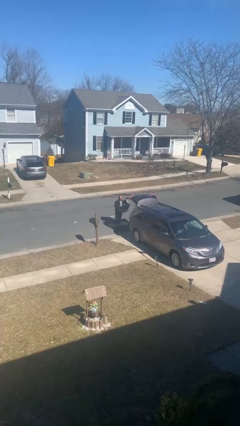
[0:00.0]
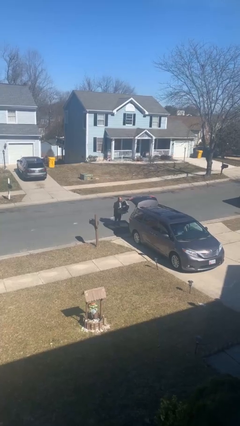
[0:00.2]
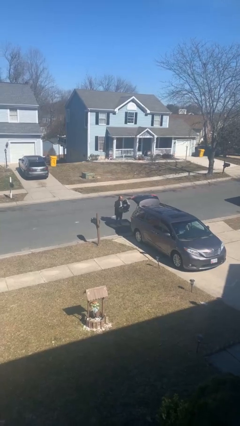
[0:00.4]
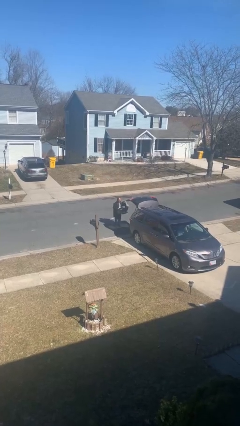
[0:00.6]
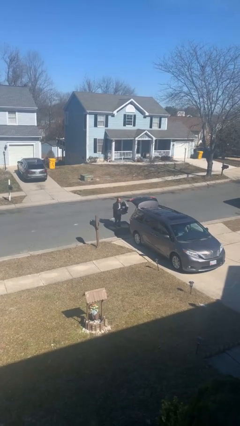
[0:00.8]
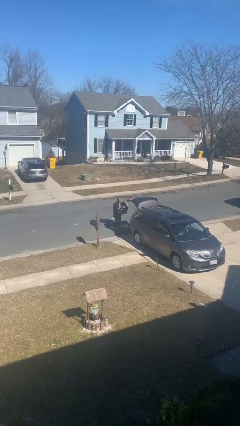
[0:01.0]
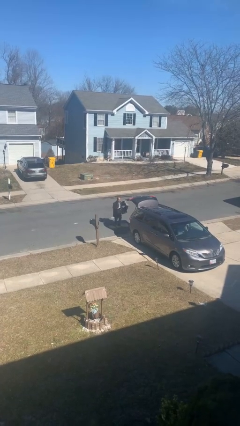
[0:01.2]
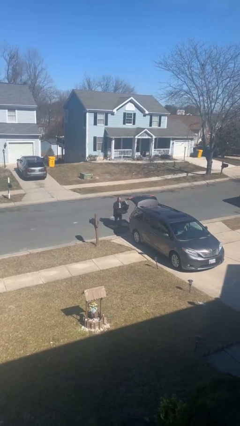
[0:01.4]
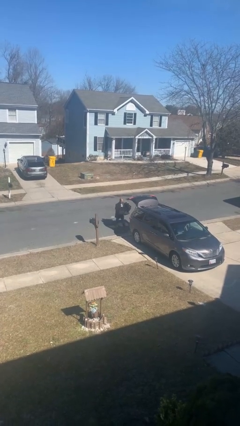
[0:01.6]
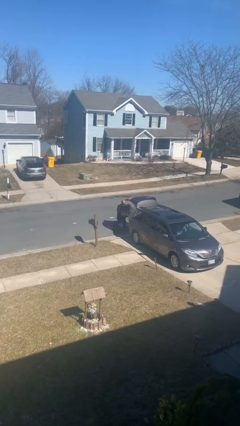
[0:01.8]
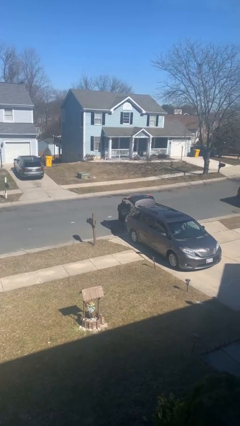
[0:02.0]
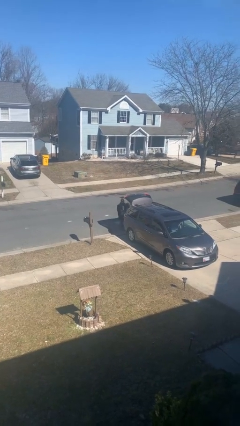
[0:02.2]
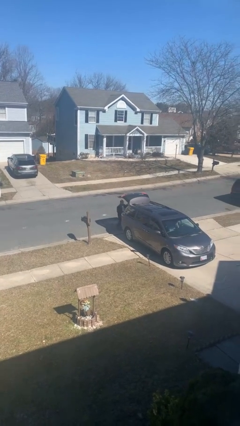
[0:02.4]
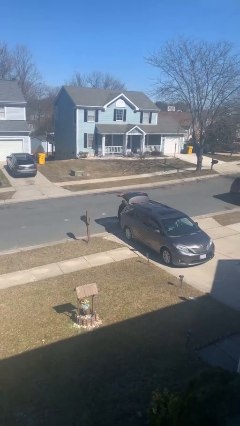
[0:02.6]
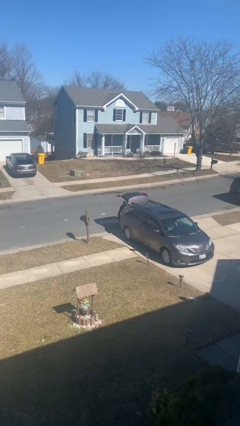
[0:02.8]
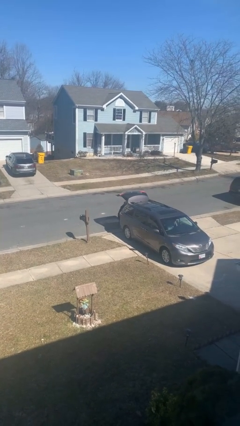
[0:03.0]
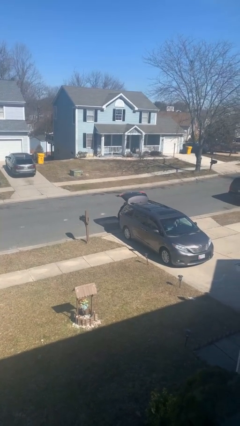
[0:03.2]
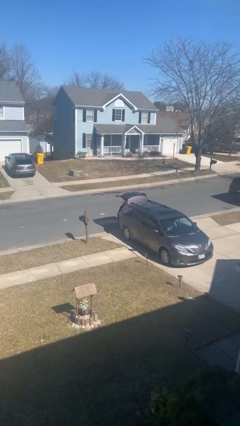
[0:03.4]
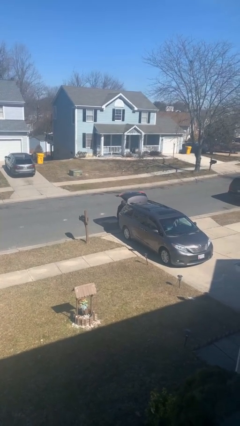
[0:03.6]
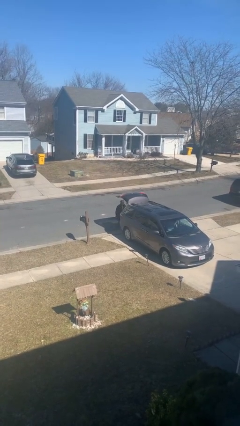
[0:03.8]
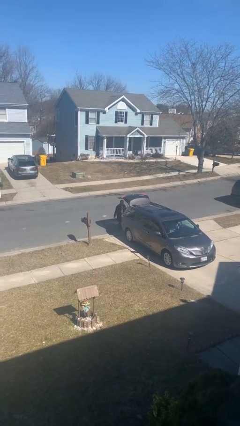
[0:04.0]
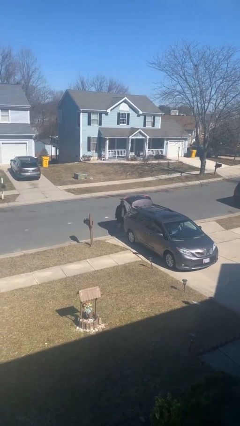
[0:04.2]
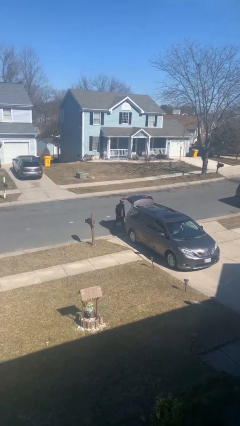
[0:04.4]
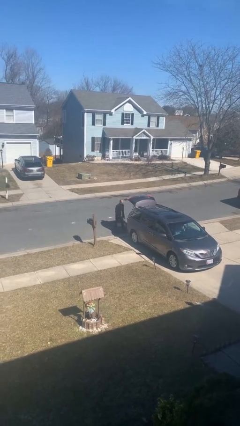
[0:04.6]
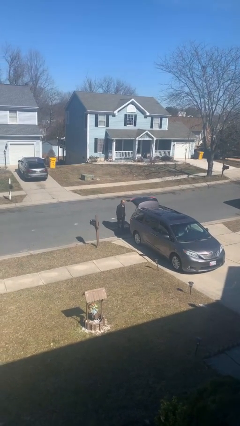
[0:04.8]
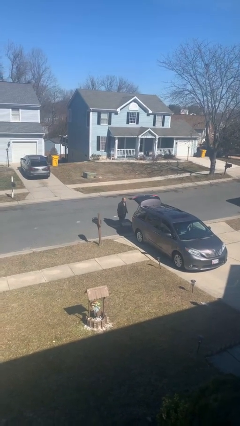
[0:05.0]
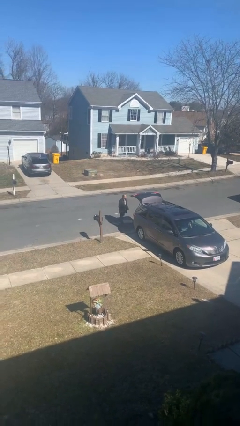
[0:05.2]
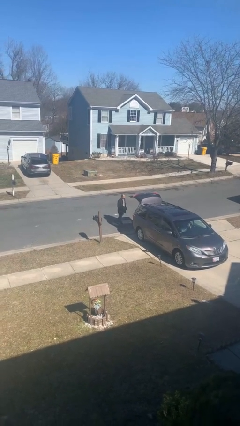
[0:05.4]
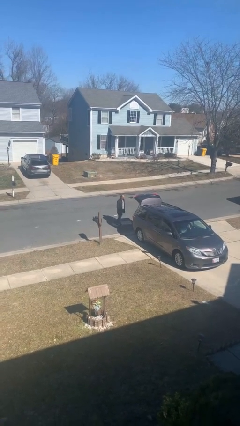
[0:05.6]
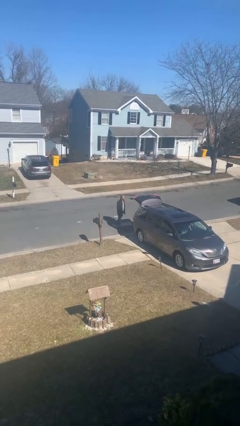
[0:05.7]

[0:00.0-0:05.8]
person loads car

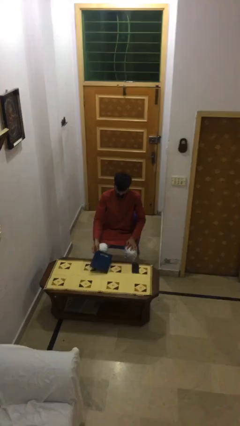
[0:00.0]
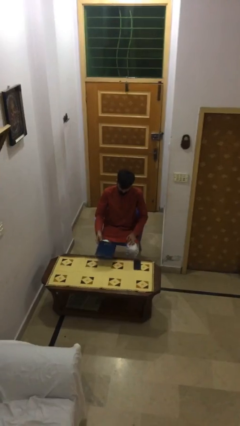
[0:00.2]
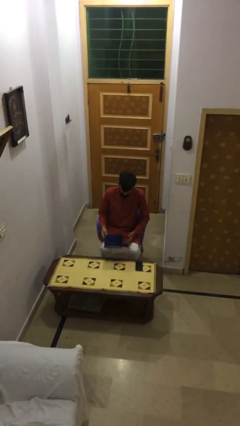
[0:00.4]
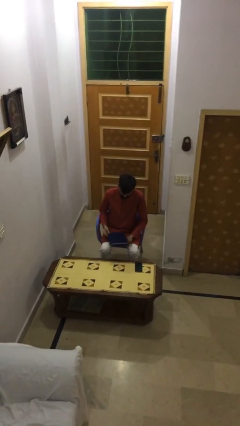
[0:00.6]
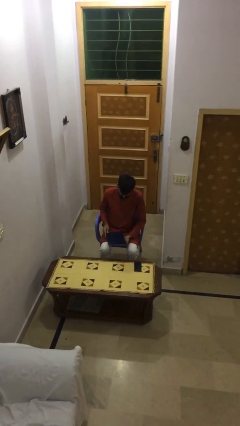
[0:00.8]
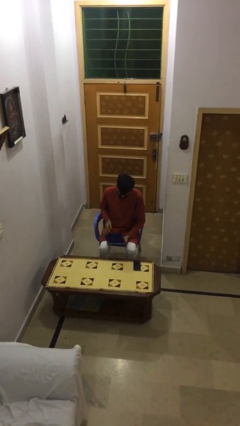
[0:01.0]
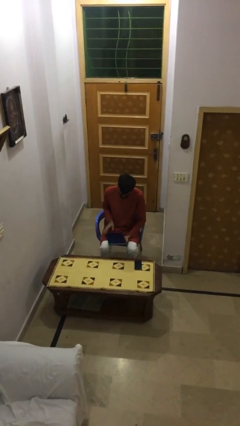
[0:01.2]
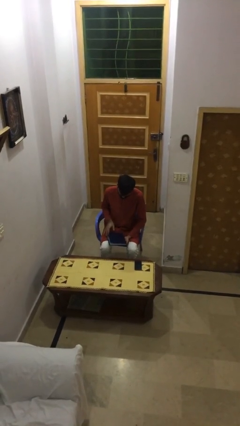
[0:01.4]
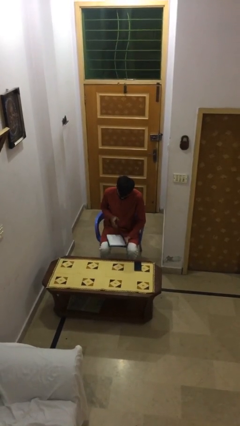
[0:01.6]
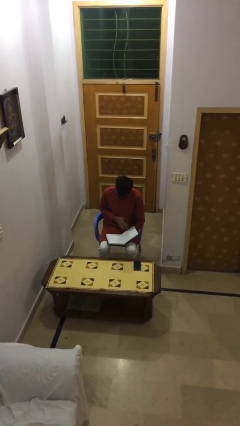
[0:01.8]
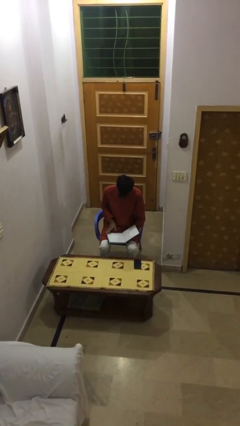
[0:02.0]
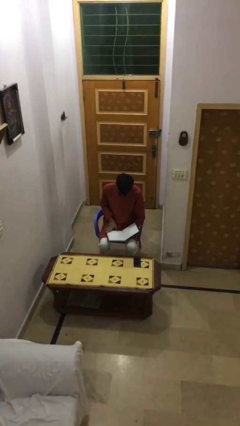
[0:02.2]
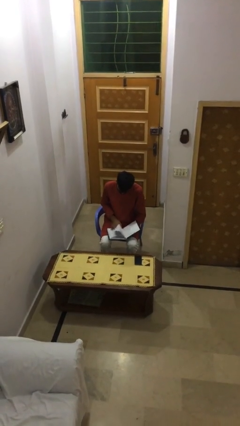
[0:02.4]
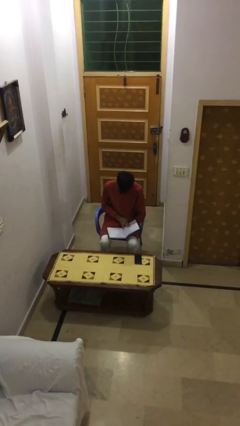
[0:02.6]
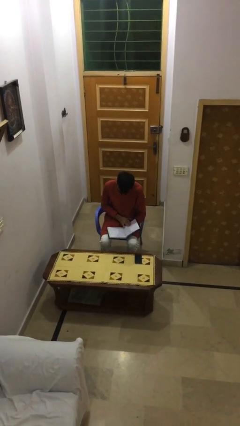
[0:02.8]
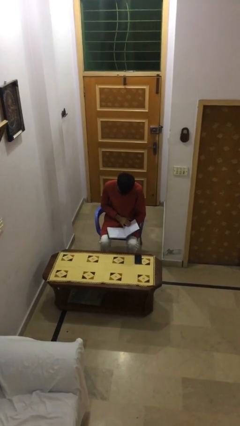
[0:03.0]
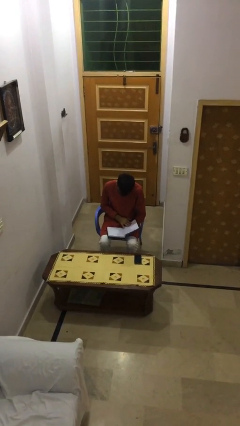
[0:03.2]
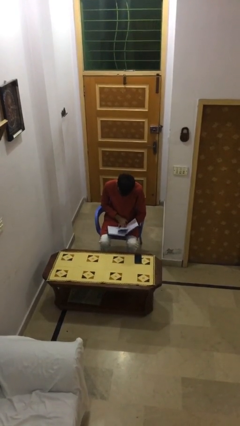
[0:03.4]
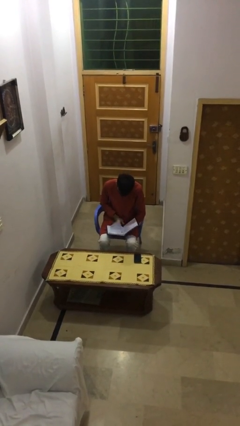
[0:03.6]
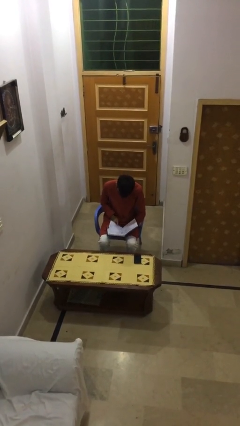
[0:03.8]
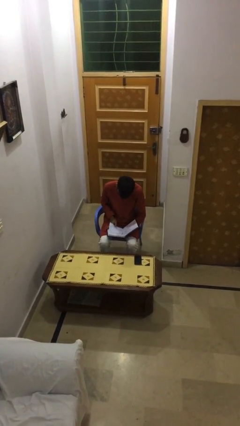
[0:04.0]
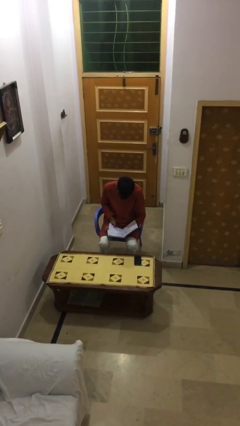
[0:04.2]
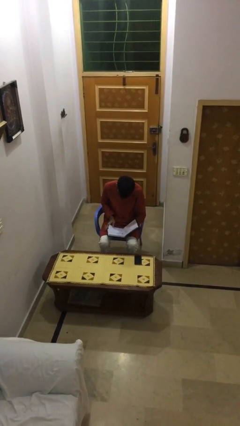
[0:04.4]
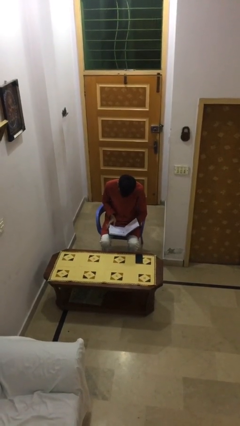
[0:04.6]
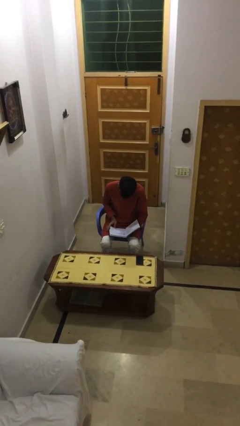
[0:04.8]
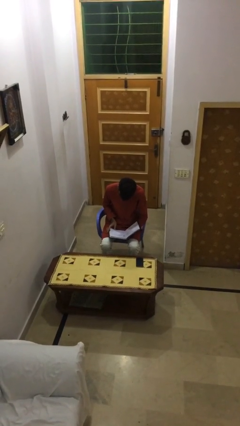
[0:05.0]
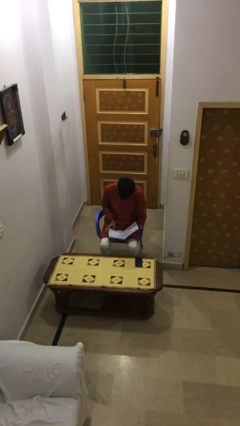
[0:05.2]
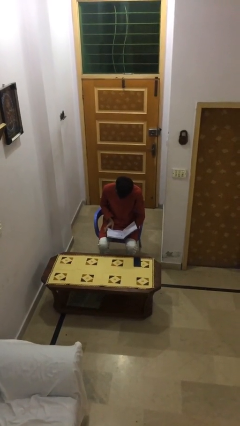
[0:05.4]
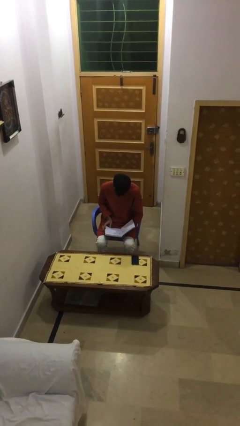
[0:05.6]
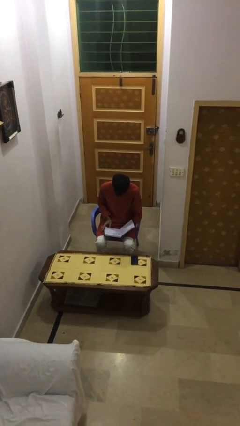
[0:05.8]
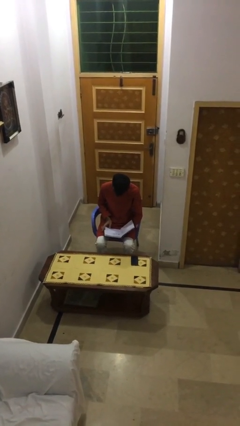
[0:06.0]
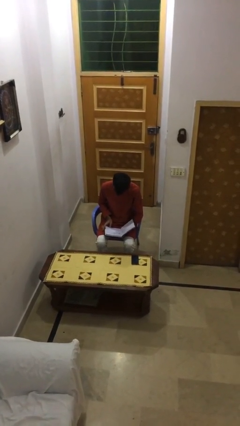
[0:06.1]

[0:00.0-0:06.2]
person reads document

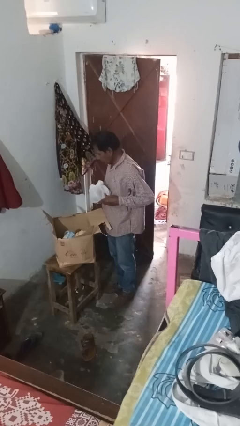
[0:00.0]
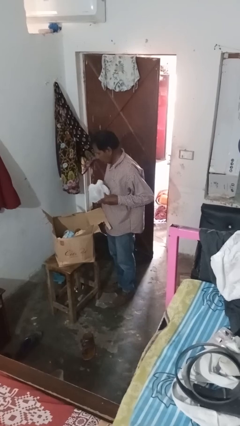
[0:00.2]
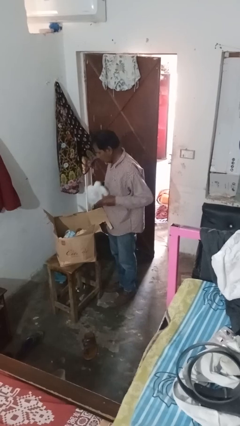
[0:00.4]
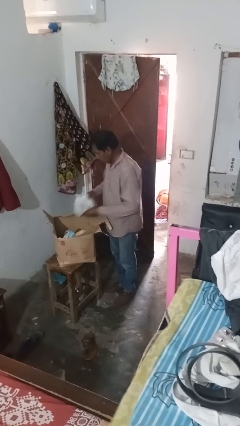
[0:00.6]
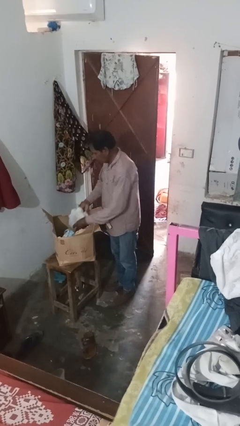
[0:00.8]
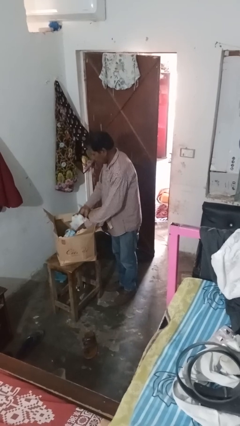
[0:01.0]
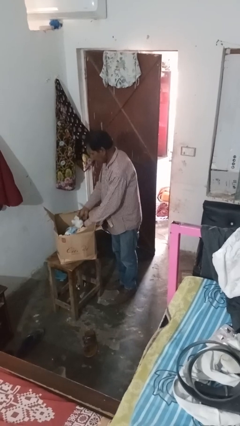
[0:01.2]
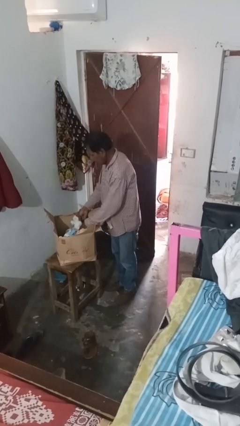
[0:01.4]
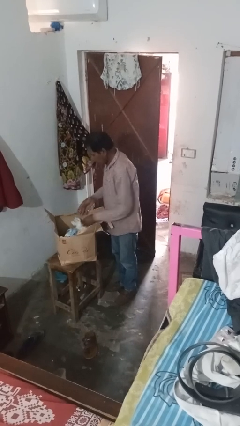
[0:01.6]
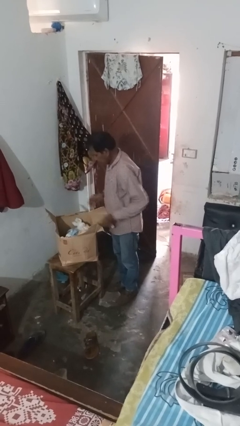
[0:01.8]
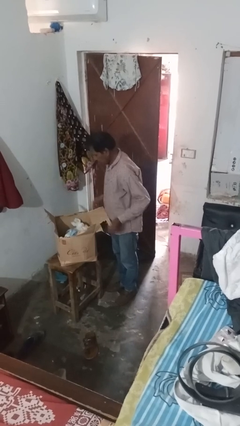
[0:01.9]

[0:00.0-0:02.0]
person puts object into box

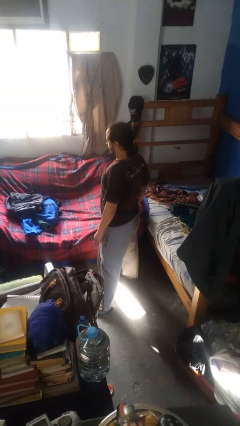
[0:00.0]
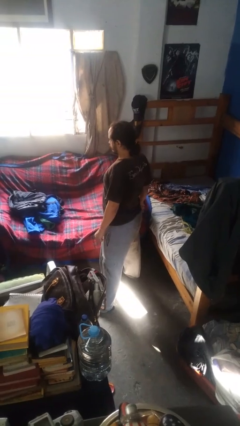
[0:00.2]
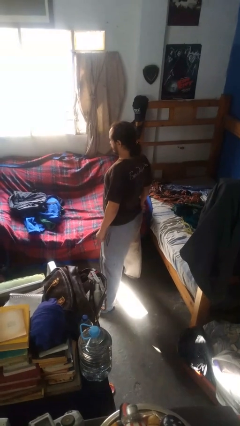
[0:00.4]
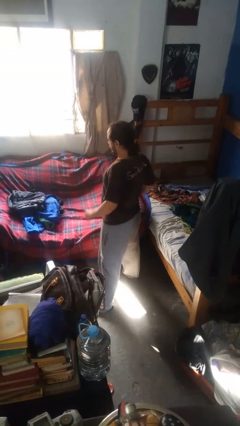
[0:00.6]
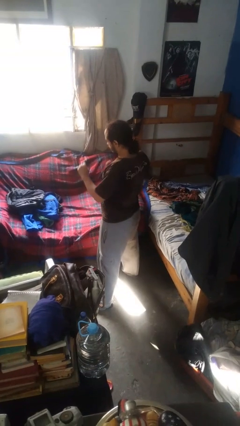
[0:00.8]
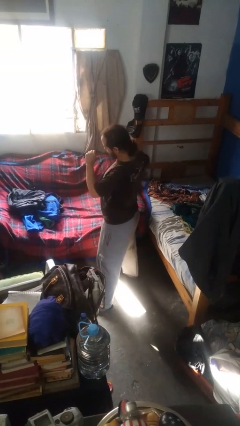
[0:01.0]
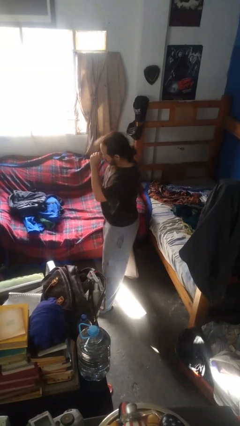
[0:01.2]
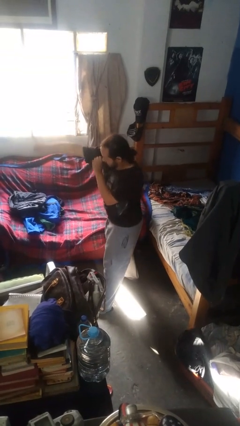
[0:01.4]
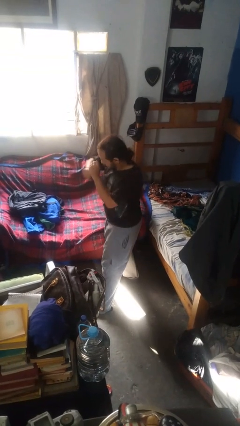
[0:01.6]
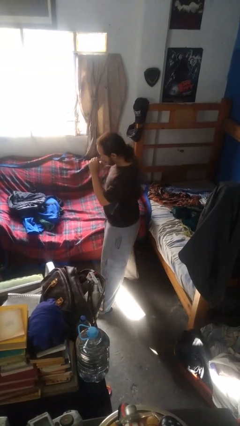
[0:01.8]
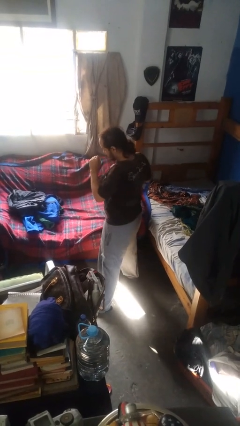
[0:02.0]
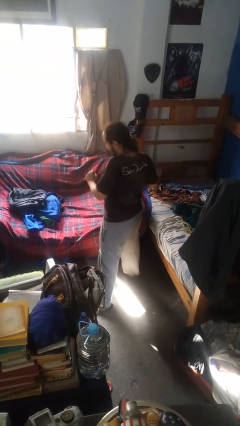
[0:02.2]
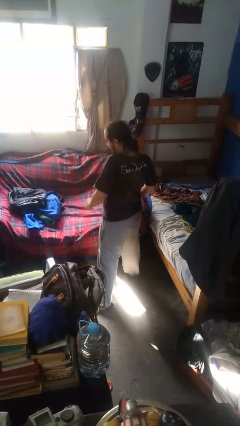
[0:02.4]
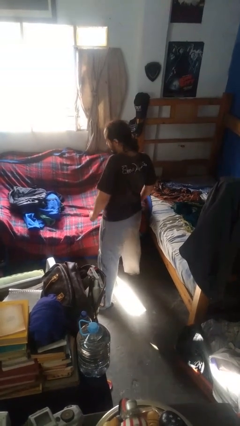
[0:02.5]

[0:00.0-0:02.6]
person punches

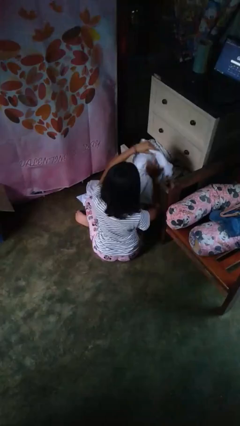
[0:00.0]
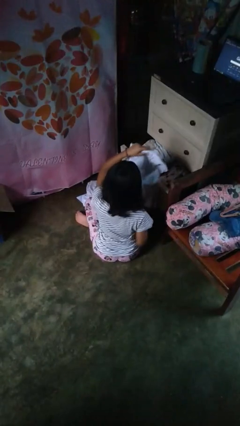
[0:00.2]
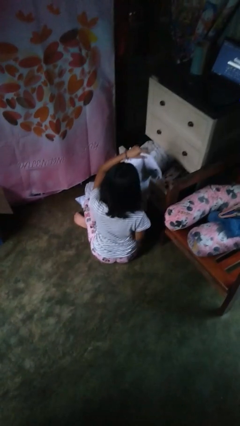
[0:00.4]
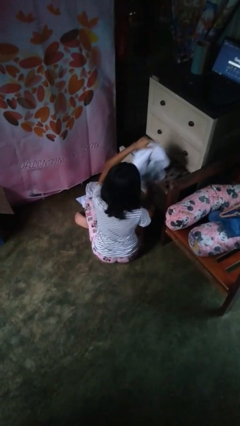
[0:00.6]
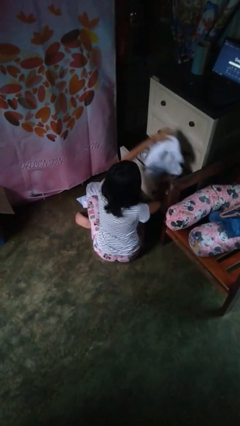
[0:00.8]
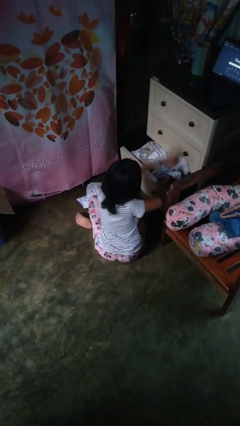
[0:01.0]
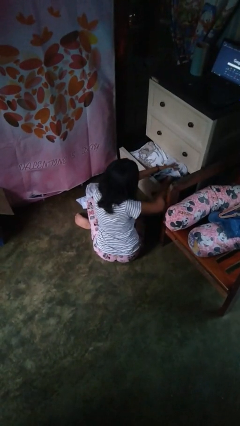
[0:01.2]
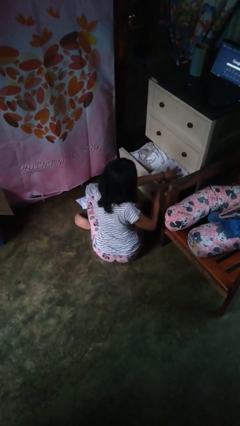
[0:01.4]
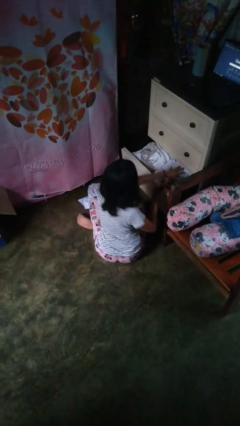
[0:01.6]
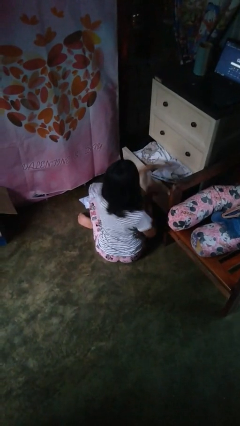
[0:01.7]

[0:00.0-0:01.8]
person puts clothes into dresser
